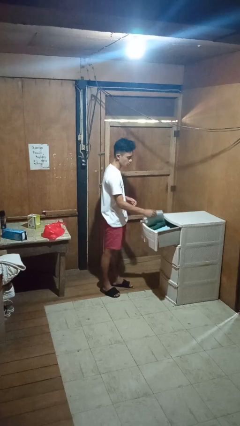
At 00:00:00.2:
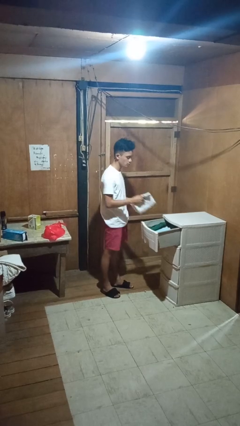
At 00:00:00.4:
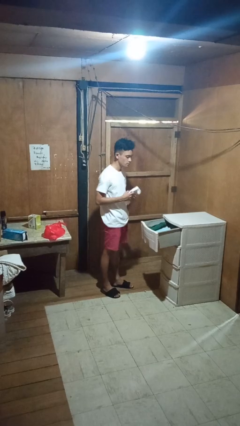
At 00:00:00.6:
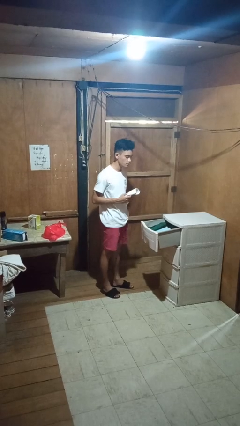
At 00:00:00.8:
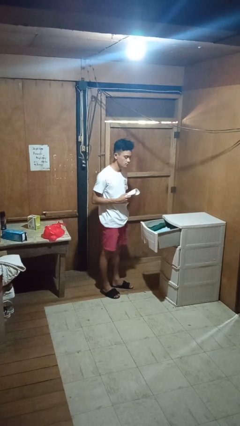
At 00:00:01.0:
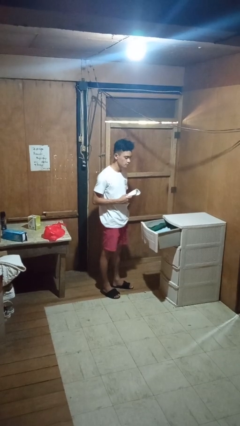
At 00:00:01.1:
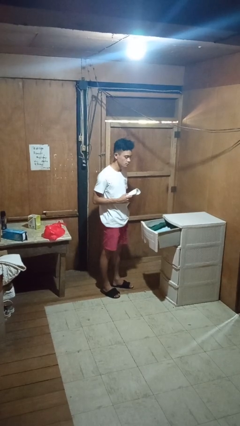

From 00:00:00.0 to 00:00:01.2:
person takes clothes from dresser

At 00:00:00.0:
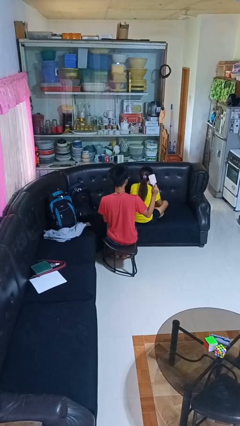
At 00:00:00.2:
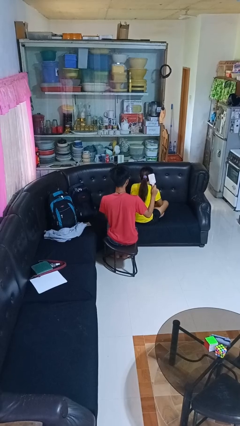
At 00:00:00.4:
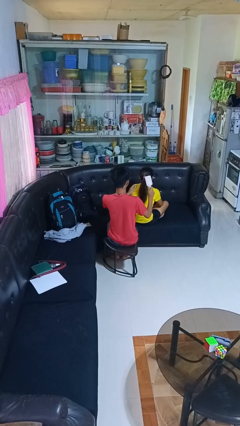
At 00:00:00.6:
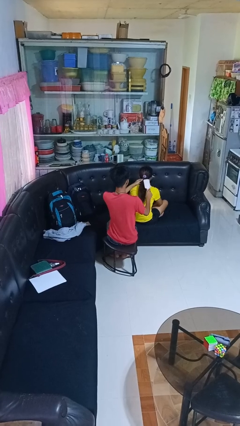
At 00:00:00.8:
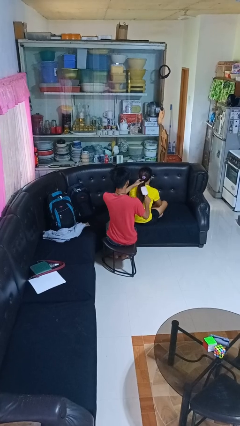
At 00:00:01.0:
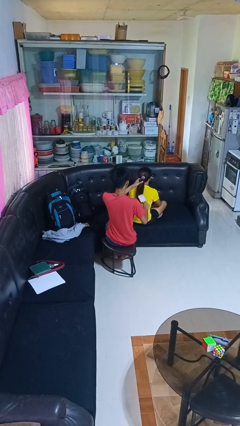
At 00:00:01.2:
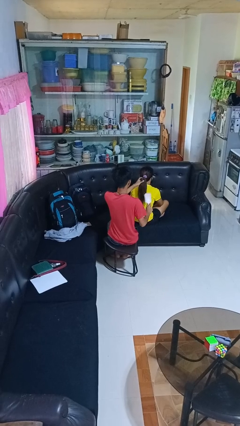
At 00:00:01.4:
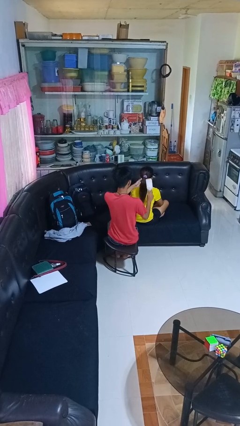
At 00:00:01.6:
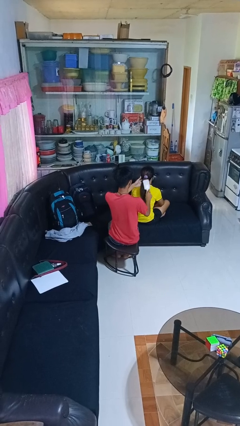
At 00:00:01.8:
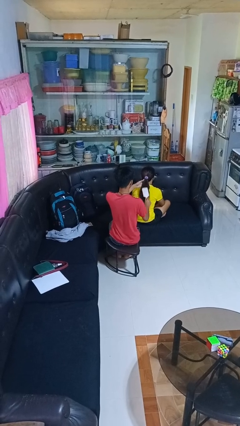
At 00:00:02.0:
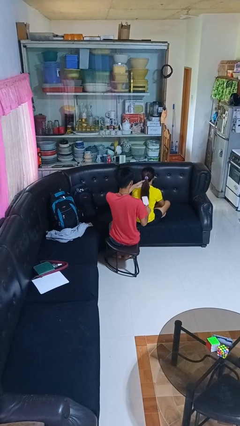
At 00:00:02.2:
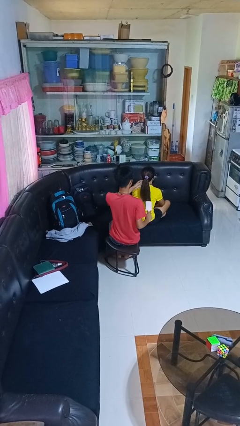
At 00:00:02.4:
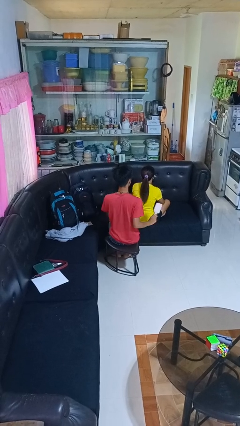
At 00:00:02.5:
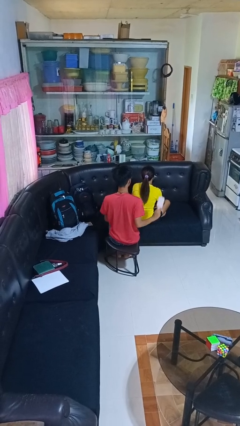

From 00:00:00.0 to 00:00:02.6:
person brushes hair of person

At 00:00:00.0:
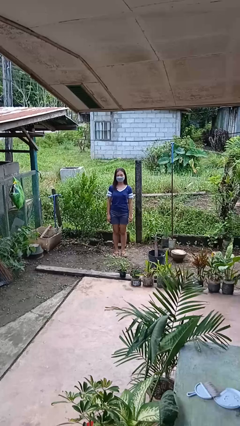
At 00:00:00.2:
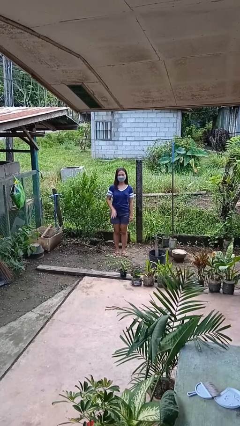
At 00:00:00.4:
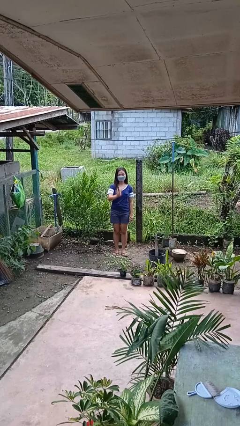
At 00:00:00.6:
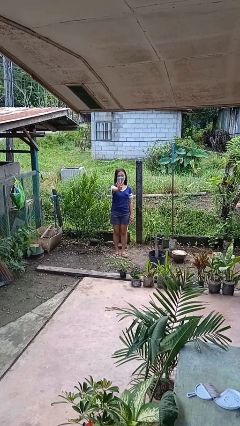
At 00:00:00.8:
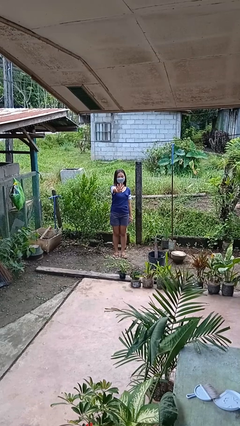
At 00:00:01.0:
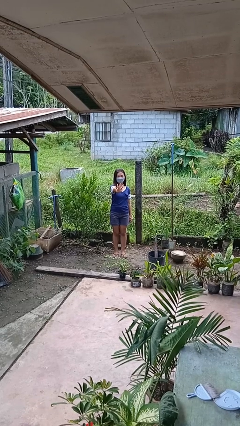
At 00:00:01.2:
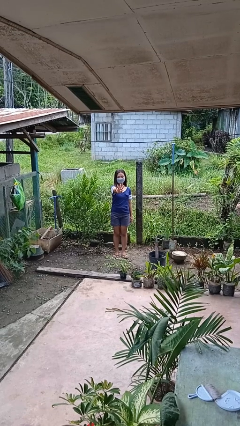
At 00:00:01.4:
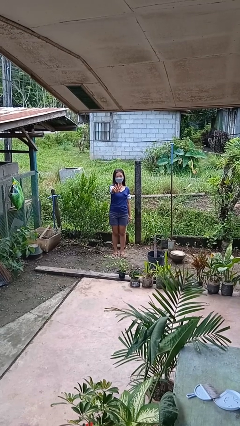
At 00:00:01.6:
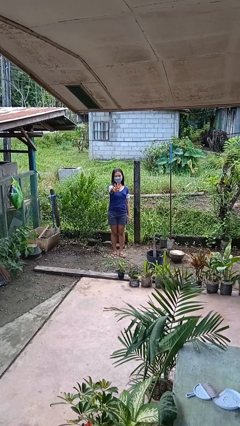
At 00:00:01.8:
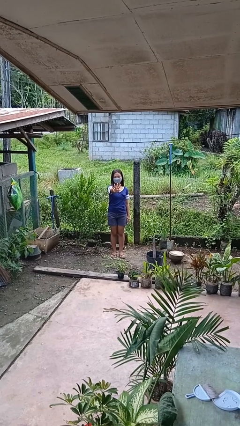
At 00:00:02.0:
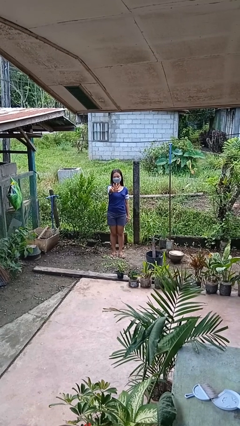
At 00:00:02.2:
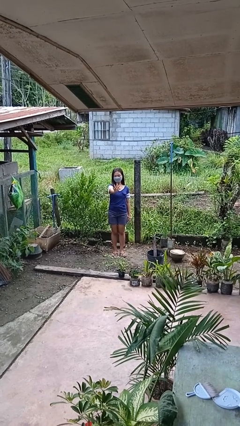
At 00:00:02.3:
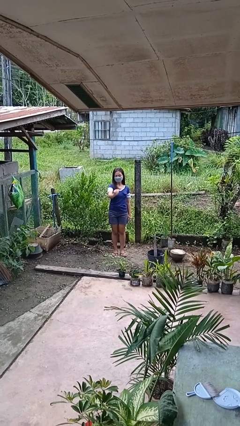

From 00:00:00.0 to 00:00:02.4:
person gestures number four

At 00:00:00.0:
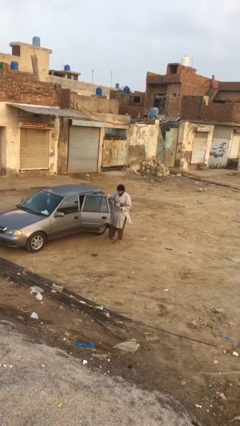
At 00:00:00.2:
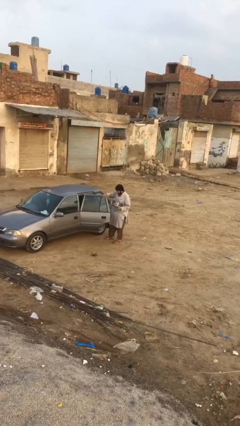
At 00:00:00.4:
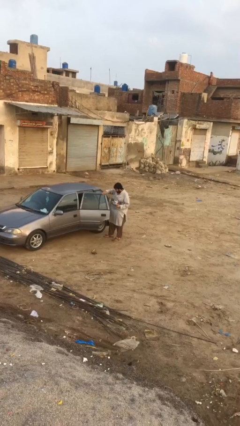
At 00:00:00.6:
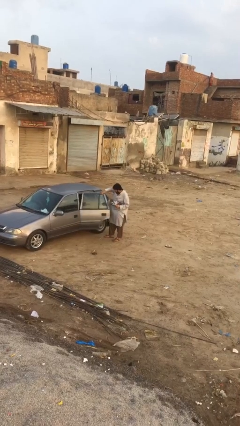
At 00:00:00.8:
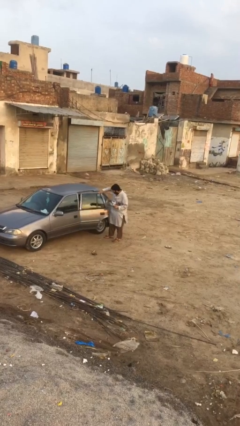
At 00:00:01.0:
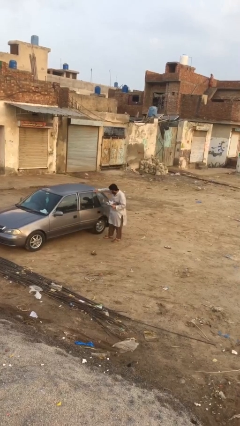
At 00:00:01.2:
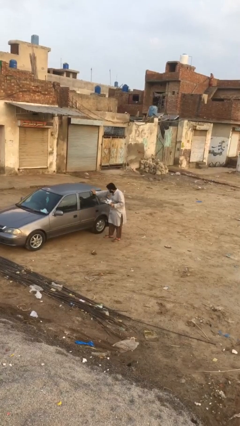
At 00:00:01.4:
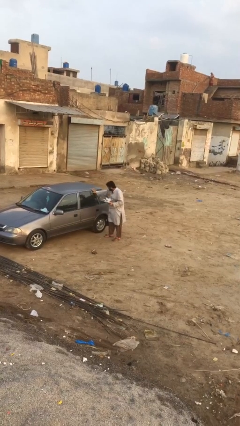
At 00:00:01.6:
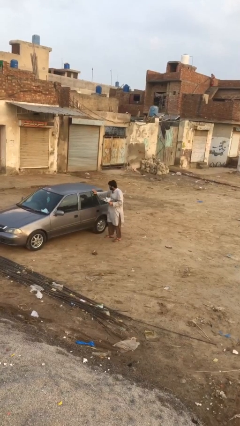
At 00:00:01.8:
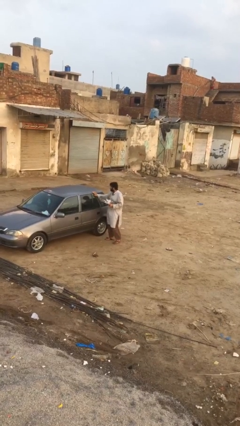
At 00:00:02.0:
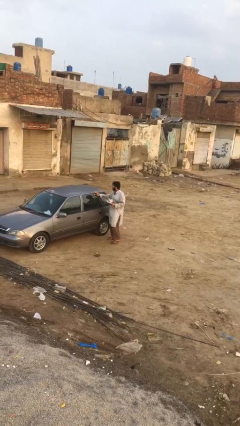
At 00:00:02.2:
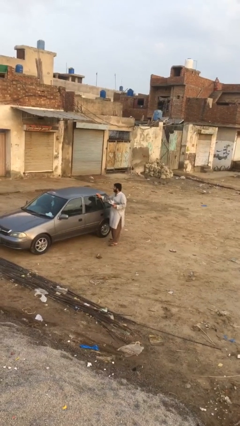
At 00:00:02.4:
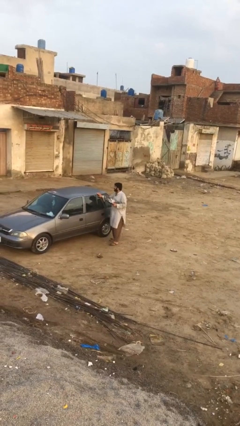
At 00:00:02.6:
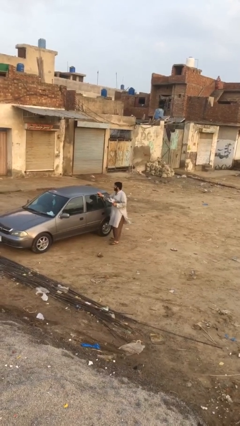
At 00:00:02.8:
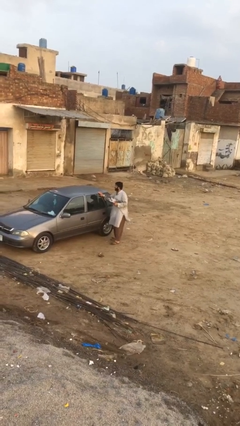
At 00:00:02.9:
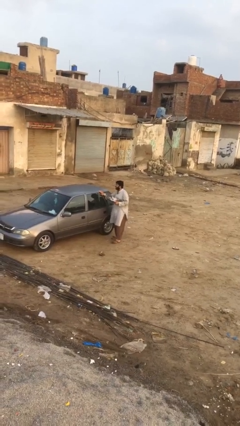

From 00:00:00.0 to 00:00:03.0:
person closes car door

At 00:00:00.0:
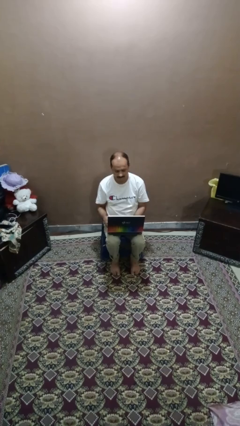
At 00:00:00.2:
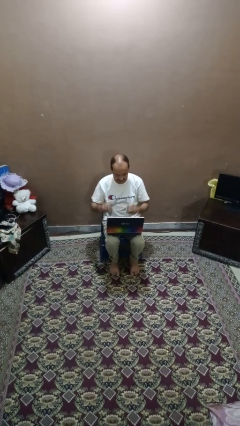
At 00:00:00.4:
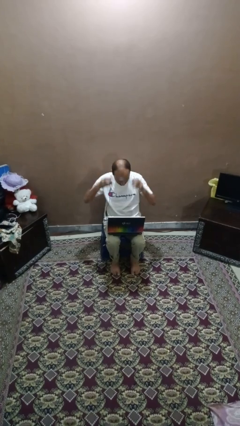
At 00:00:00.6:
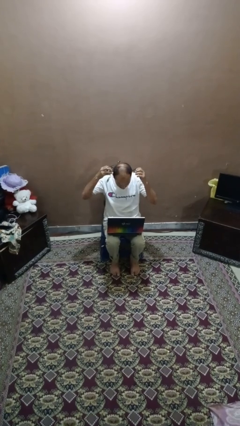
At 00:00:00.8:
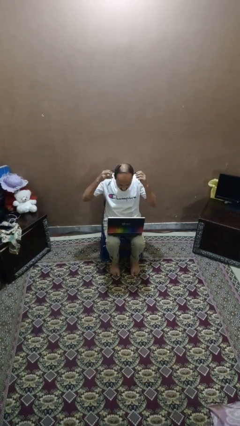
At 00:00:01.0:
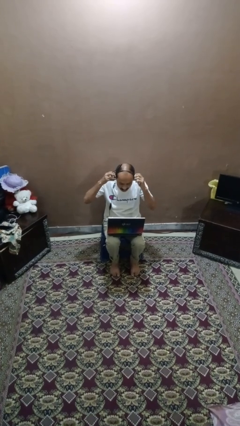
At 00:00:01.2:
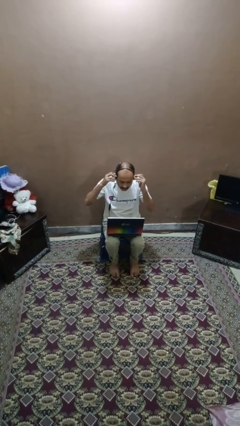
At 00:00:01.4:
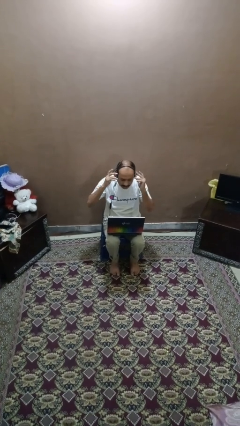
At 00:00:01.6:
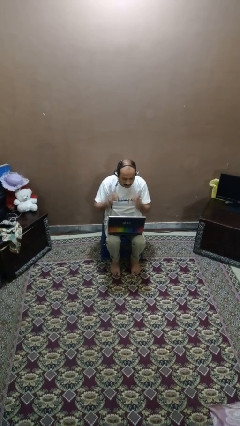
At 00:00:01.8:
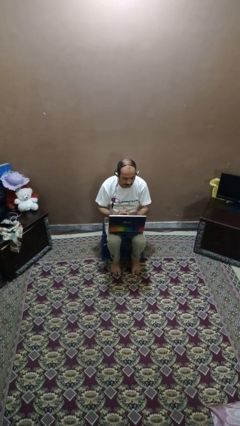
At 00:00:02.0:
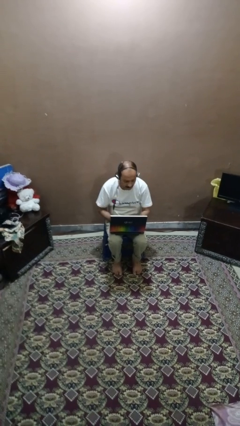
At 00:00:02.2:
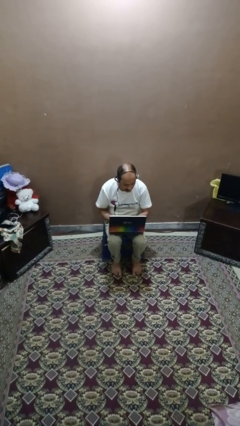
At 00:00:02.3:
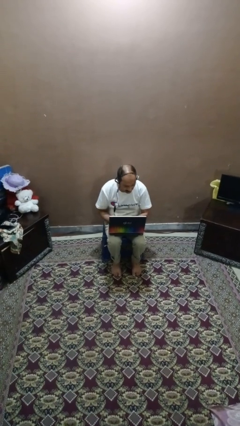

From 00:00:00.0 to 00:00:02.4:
person puts on headphones

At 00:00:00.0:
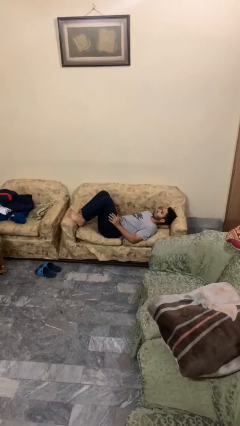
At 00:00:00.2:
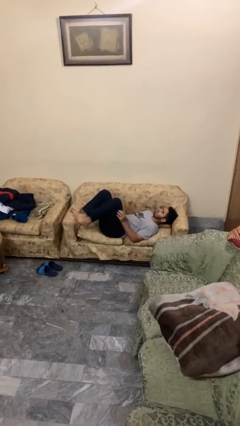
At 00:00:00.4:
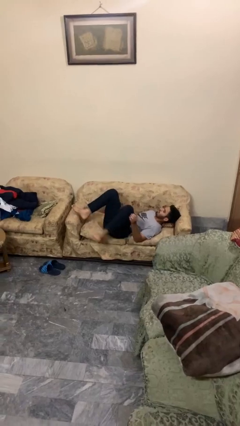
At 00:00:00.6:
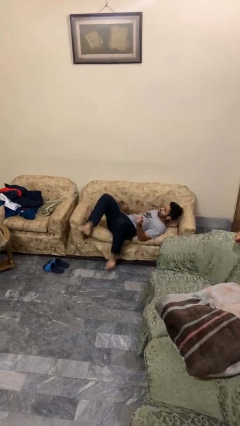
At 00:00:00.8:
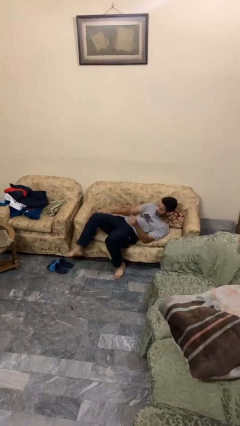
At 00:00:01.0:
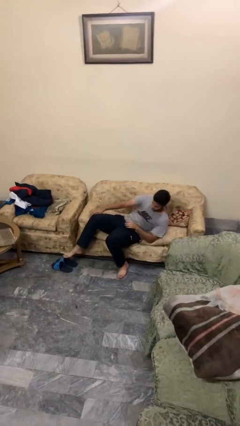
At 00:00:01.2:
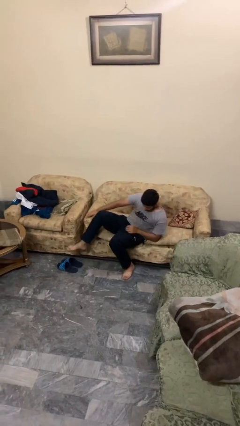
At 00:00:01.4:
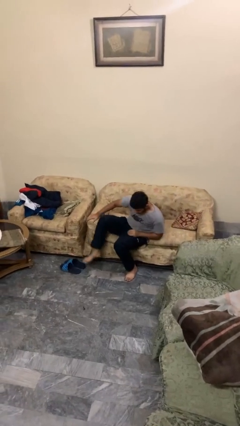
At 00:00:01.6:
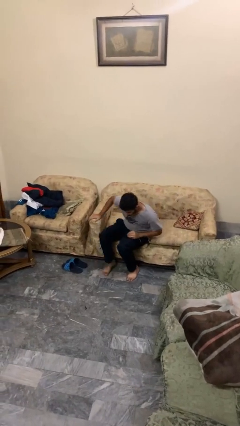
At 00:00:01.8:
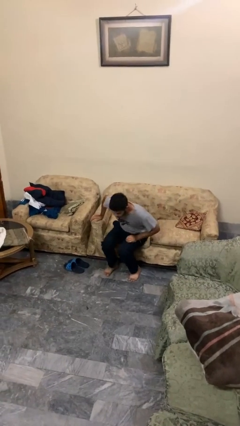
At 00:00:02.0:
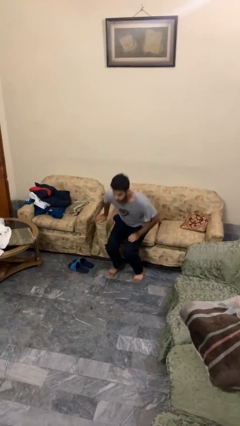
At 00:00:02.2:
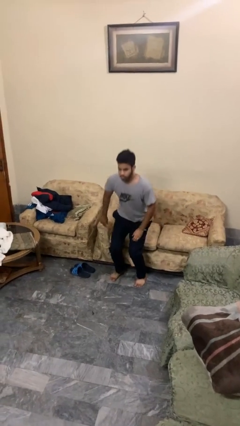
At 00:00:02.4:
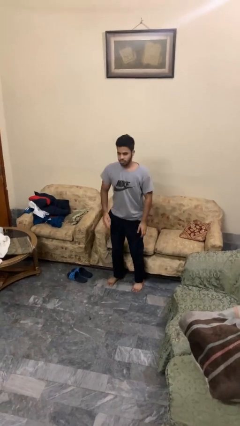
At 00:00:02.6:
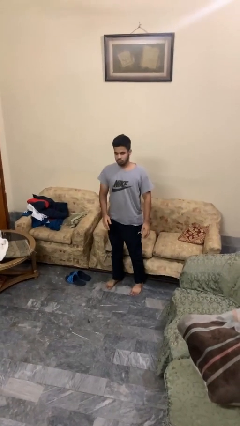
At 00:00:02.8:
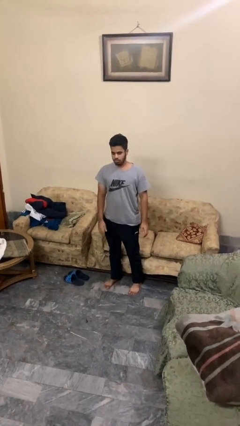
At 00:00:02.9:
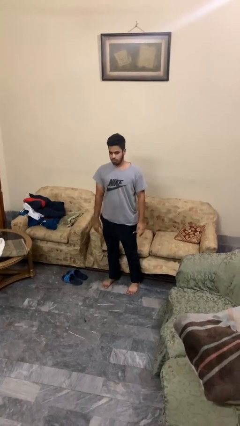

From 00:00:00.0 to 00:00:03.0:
person stands up

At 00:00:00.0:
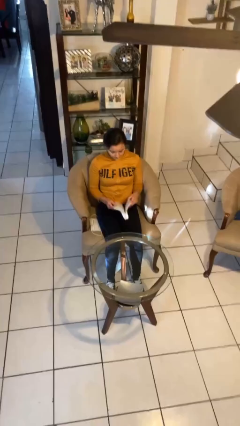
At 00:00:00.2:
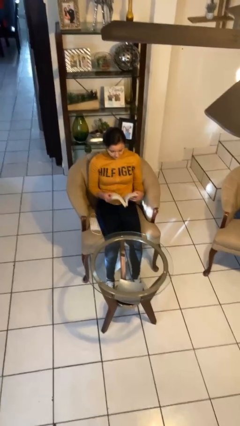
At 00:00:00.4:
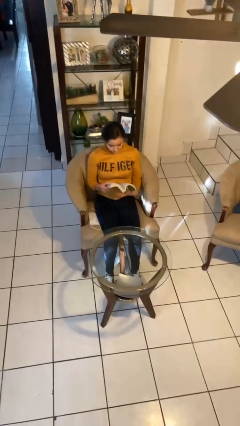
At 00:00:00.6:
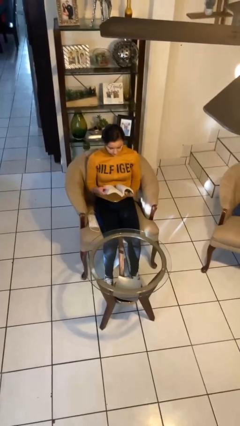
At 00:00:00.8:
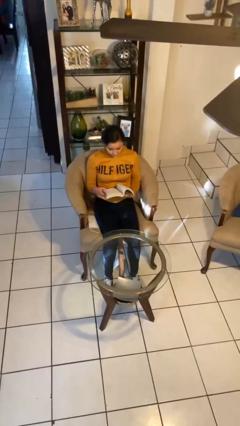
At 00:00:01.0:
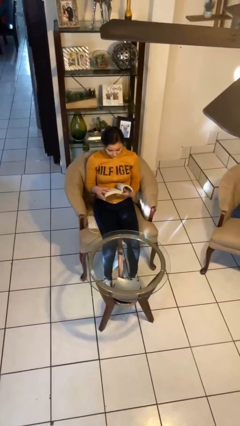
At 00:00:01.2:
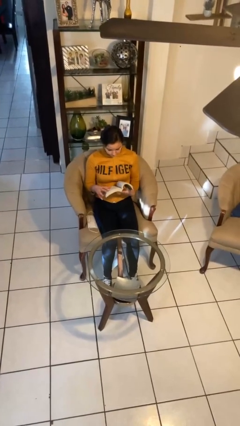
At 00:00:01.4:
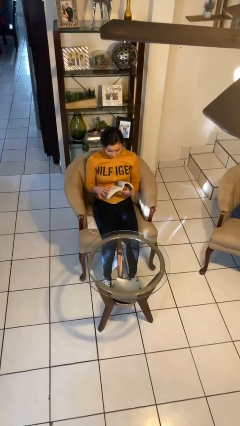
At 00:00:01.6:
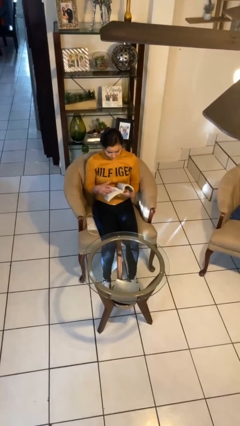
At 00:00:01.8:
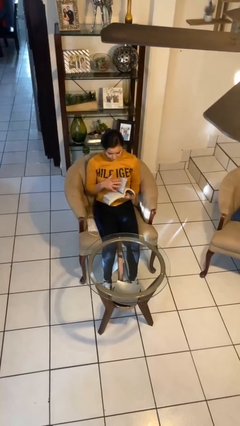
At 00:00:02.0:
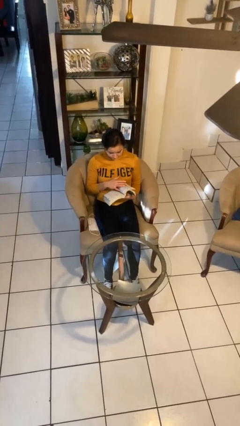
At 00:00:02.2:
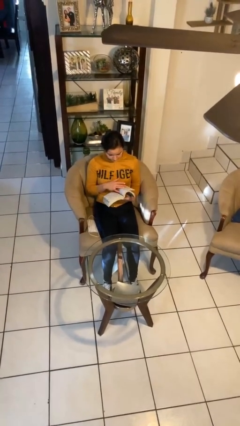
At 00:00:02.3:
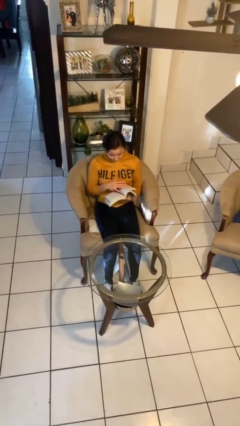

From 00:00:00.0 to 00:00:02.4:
person reads book
